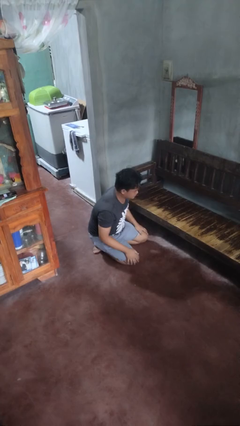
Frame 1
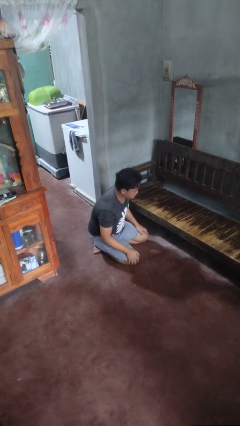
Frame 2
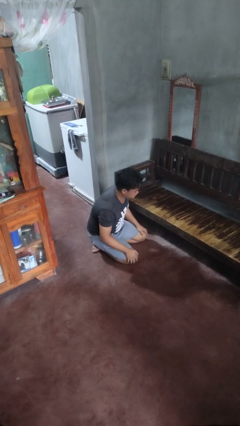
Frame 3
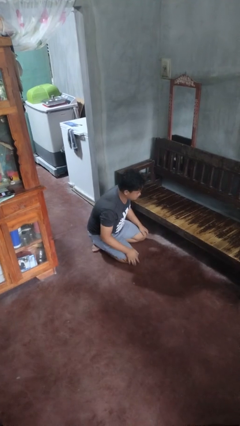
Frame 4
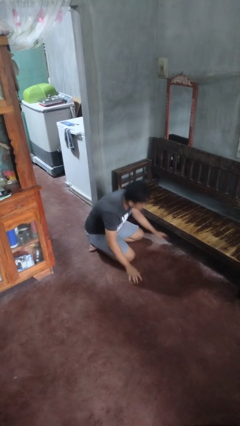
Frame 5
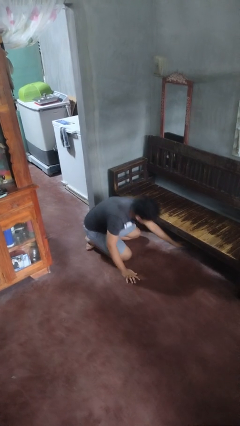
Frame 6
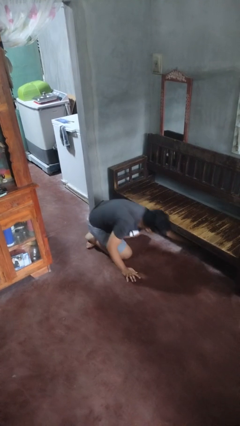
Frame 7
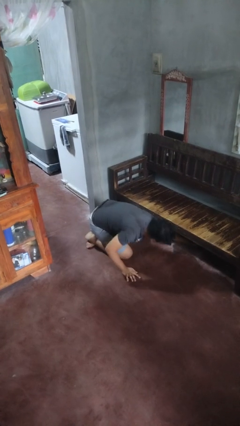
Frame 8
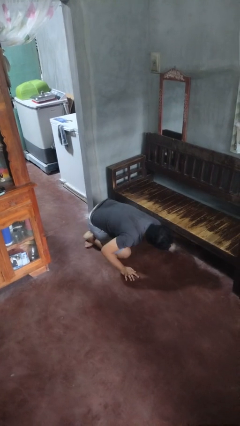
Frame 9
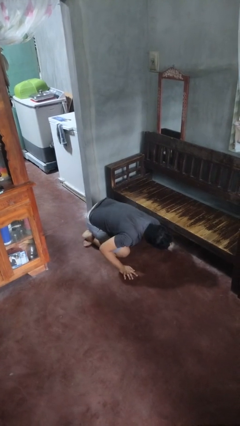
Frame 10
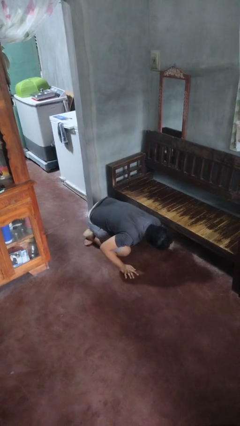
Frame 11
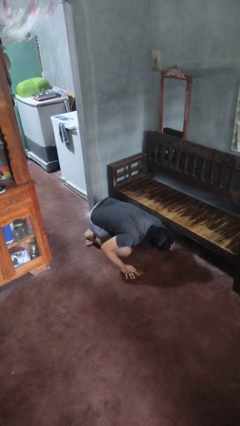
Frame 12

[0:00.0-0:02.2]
person searches under couch

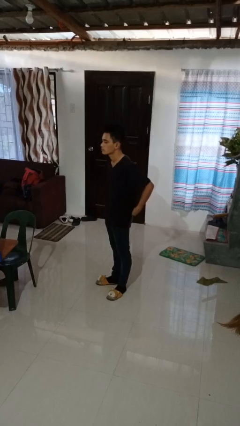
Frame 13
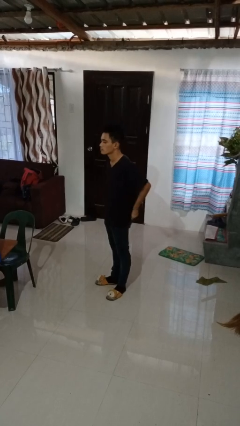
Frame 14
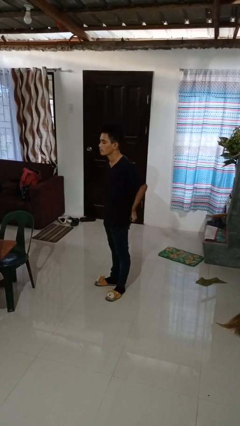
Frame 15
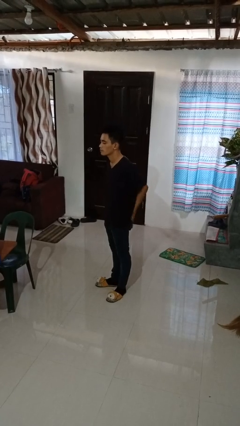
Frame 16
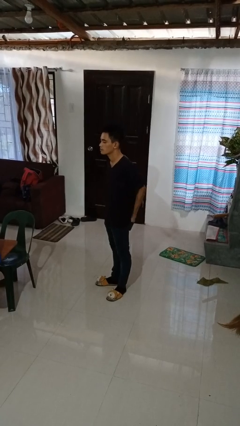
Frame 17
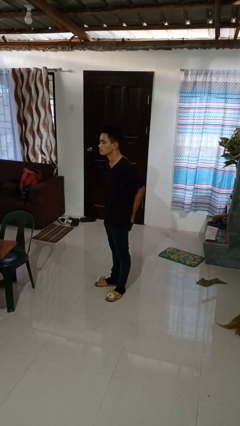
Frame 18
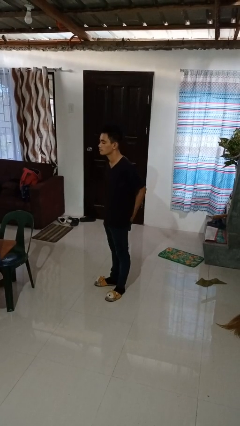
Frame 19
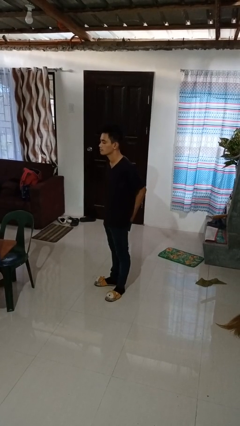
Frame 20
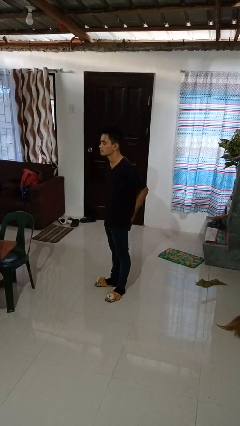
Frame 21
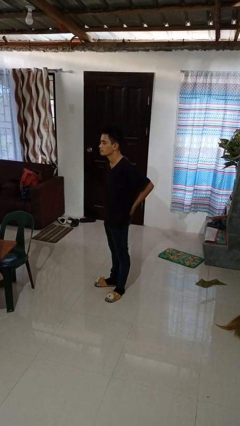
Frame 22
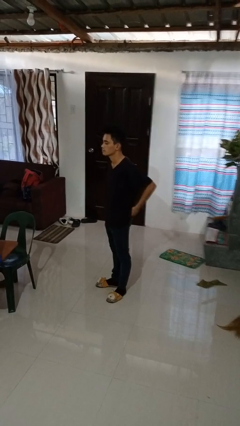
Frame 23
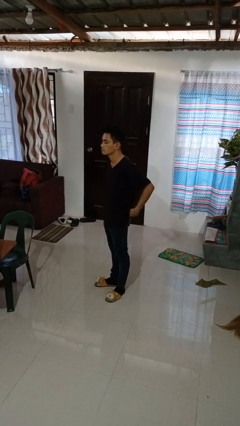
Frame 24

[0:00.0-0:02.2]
person puts hands in back pockets

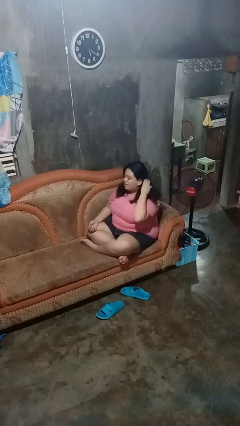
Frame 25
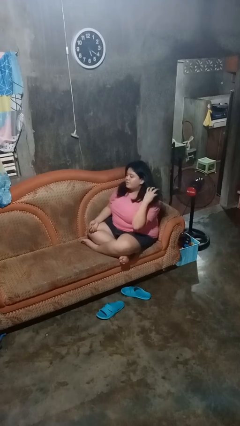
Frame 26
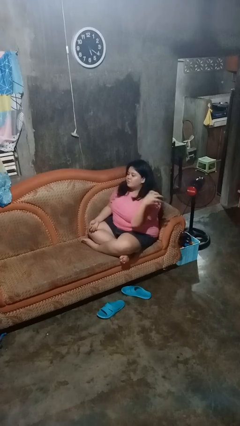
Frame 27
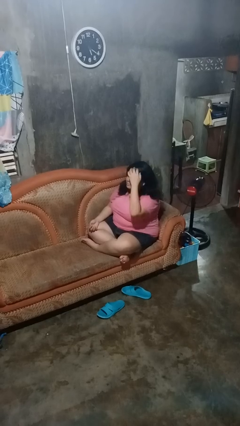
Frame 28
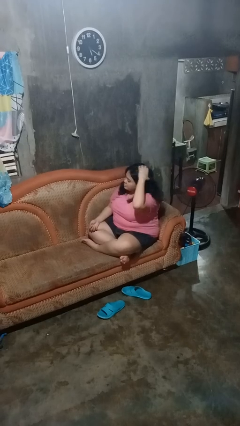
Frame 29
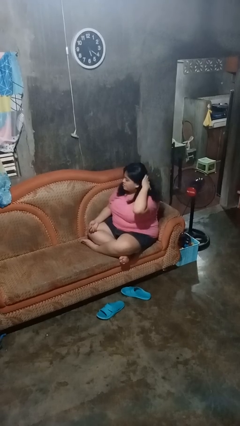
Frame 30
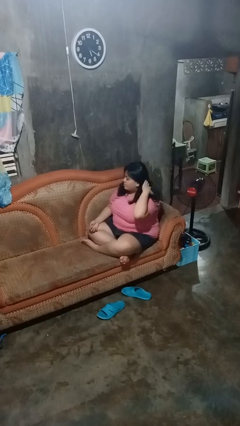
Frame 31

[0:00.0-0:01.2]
person strokes hair

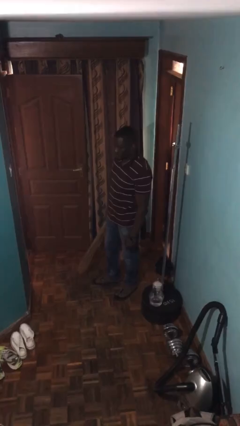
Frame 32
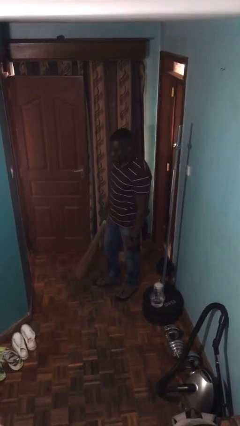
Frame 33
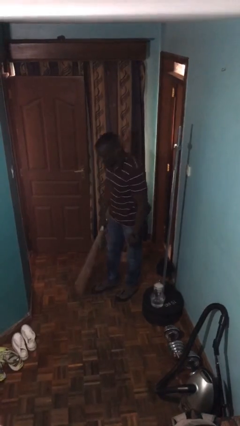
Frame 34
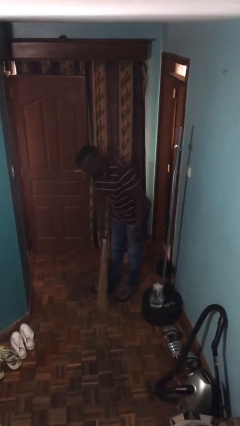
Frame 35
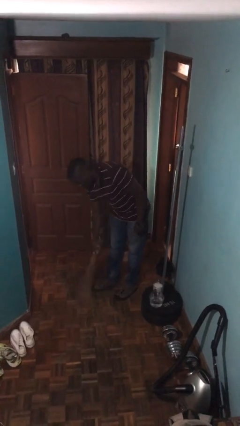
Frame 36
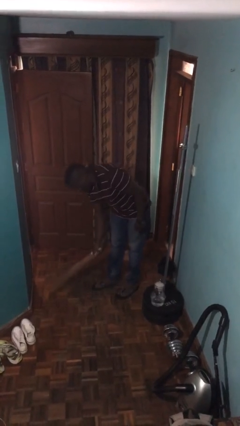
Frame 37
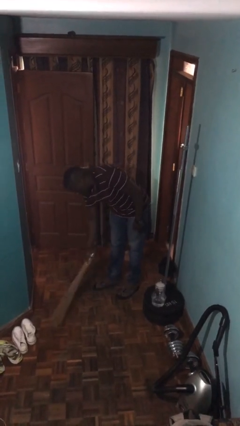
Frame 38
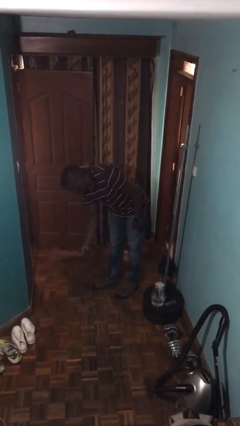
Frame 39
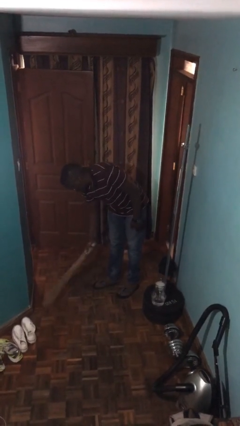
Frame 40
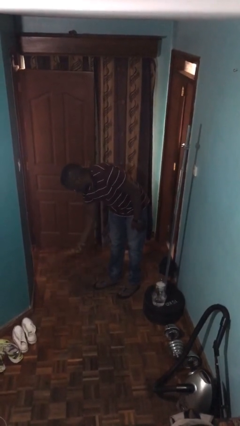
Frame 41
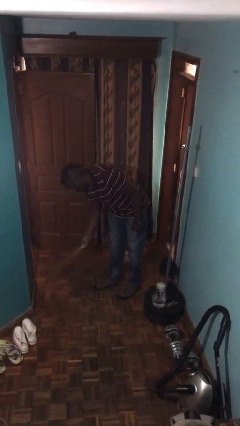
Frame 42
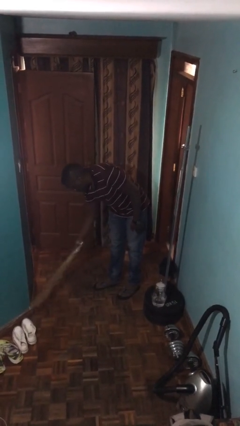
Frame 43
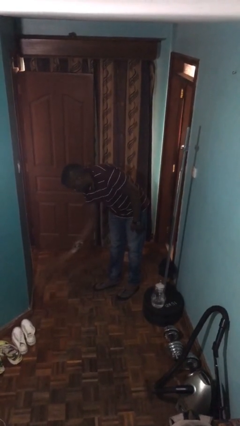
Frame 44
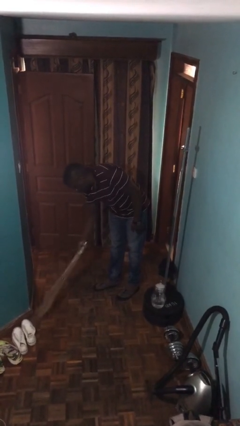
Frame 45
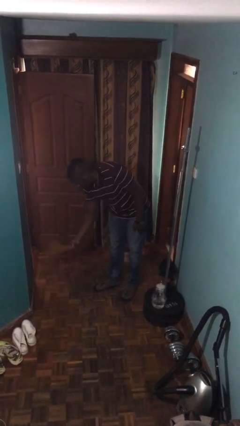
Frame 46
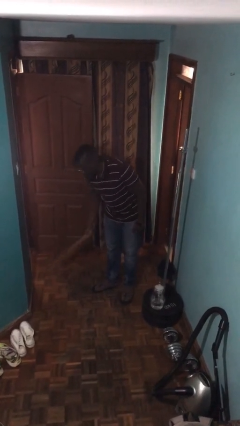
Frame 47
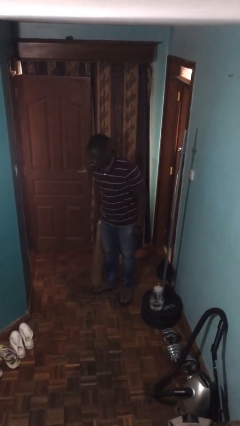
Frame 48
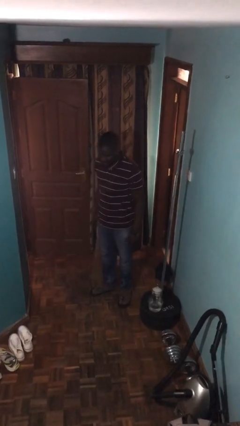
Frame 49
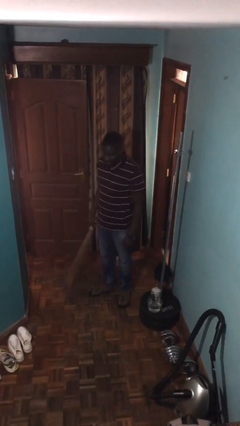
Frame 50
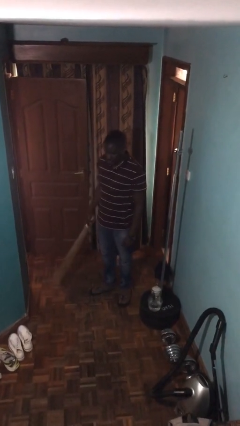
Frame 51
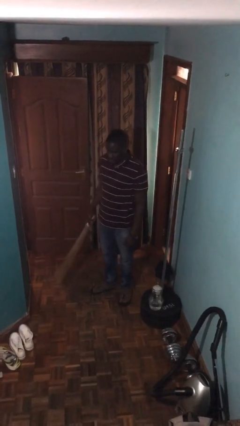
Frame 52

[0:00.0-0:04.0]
person sweeps floor

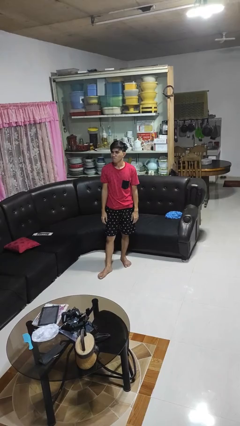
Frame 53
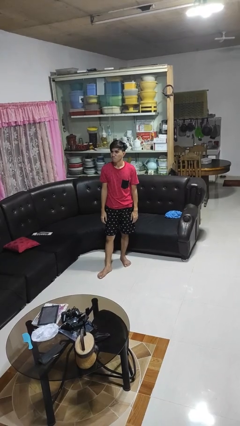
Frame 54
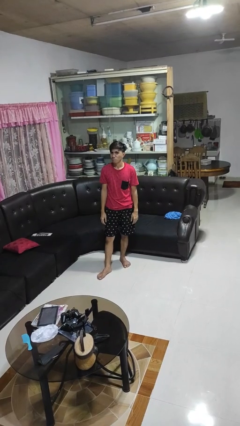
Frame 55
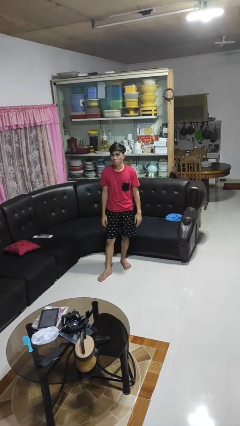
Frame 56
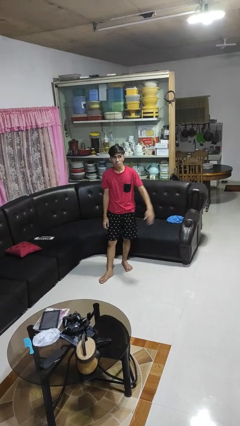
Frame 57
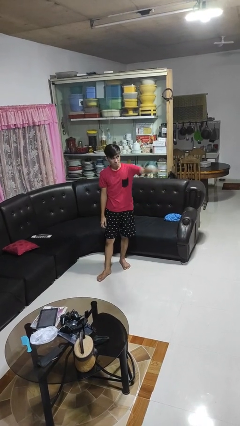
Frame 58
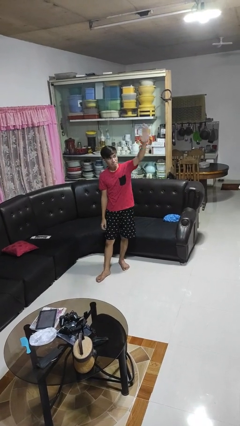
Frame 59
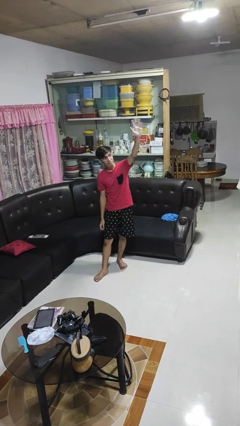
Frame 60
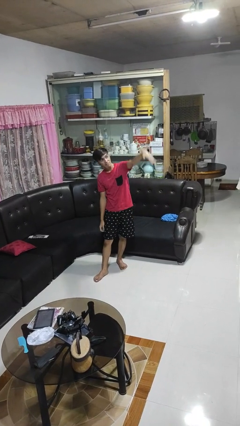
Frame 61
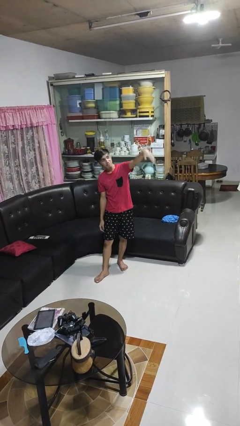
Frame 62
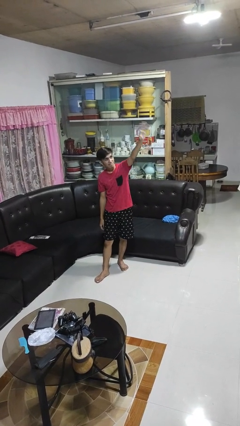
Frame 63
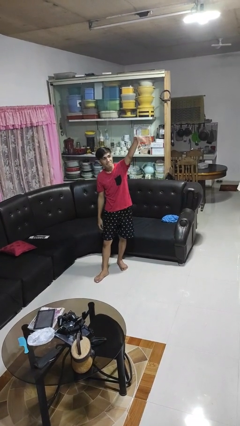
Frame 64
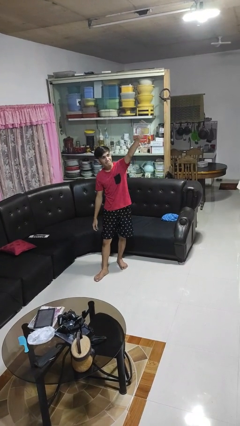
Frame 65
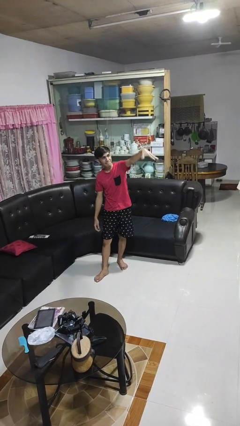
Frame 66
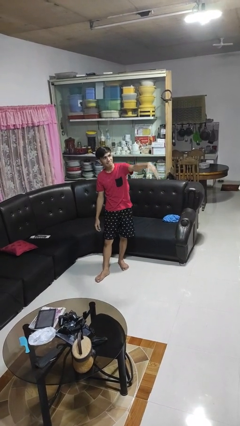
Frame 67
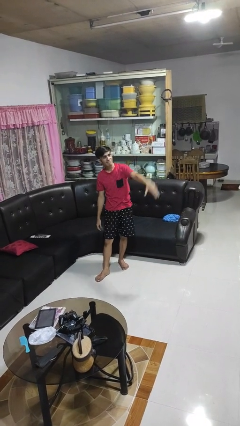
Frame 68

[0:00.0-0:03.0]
person gestures come here

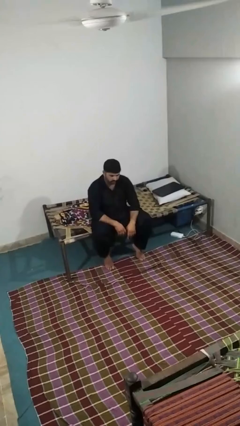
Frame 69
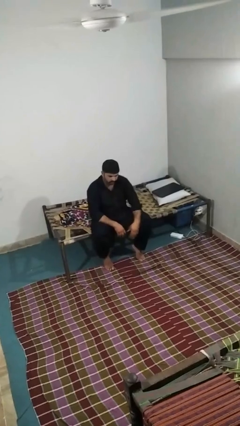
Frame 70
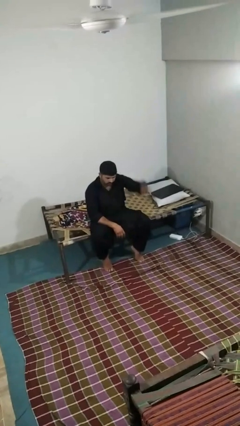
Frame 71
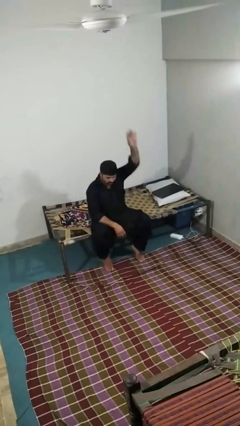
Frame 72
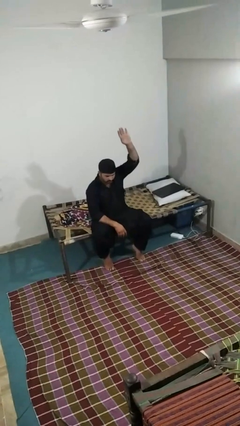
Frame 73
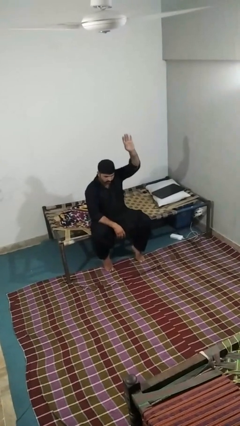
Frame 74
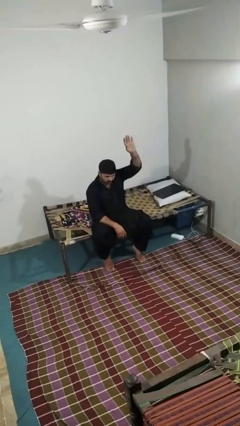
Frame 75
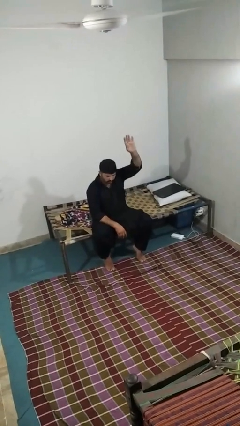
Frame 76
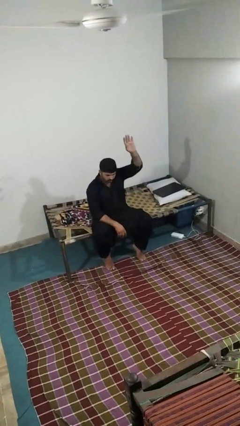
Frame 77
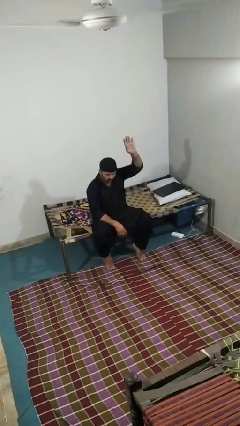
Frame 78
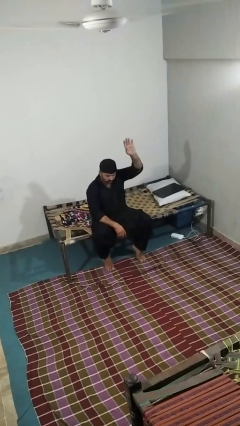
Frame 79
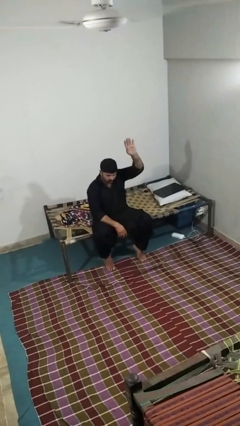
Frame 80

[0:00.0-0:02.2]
person gestures raise hand

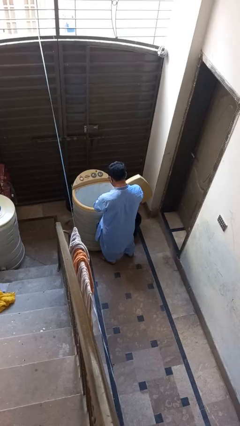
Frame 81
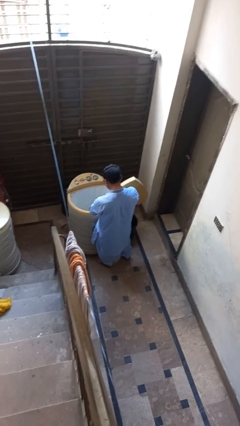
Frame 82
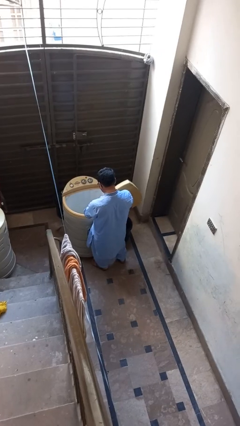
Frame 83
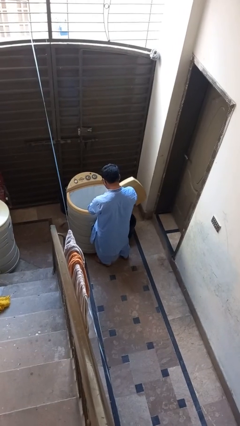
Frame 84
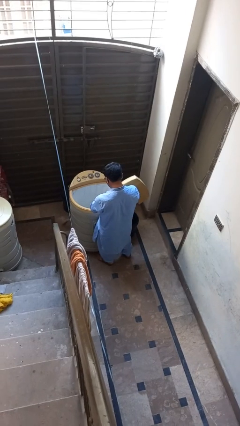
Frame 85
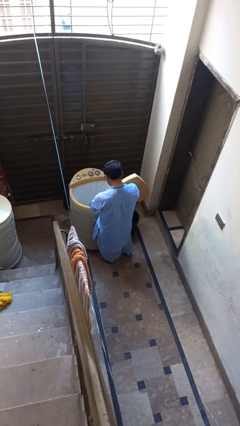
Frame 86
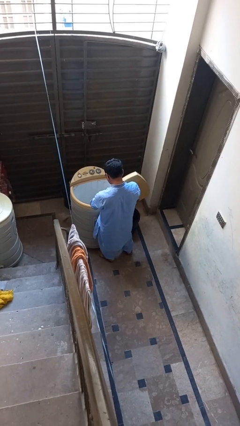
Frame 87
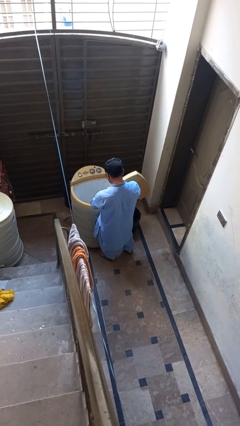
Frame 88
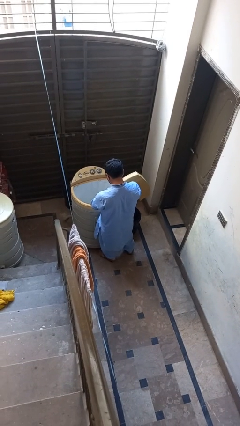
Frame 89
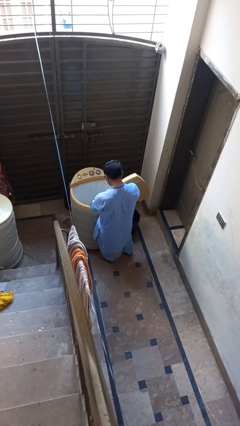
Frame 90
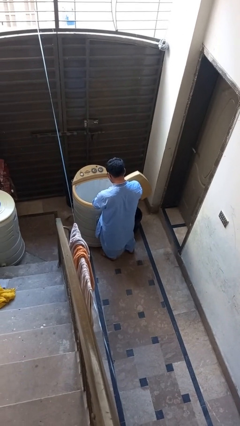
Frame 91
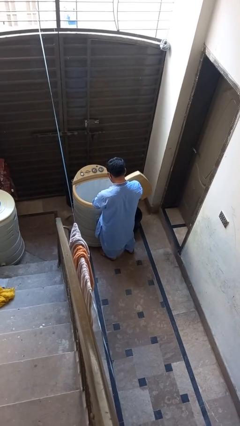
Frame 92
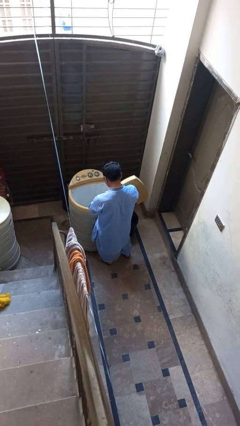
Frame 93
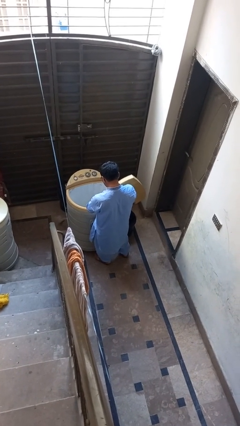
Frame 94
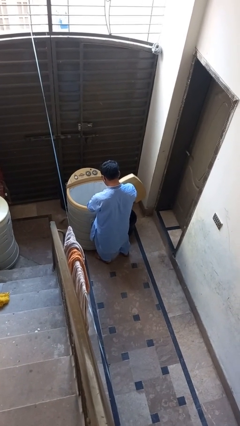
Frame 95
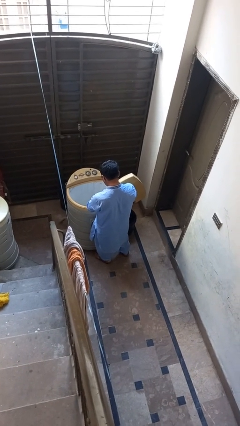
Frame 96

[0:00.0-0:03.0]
person opens clothes washer
